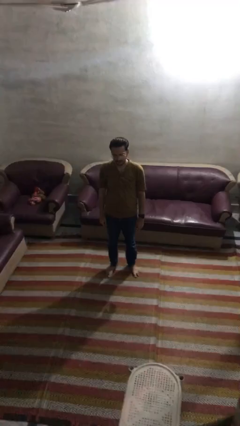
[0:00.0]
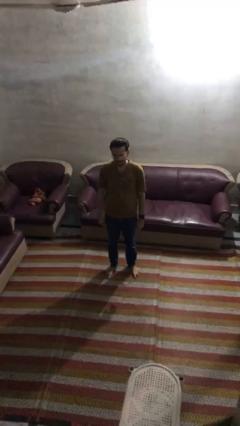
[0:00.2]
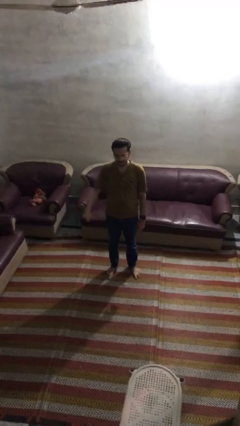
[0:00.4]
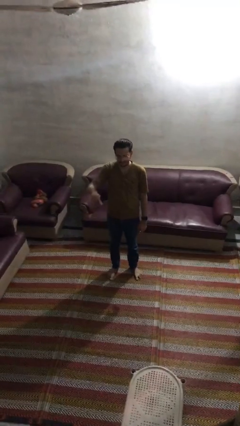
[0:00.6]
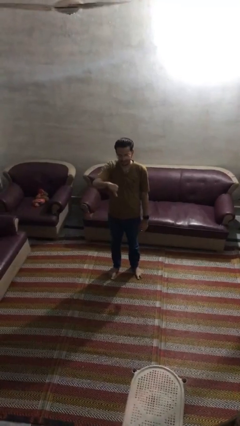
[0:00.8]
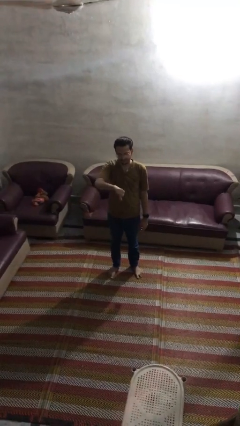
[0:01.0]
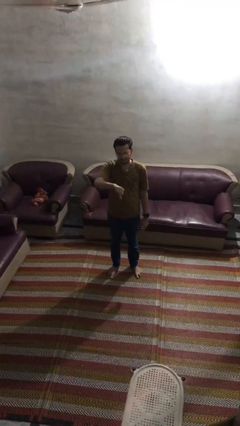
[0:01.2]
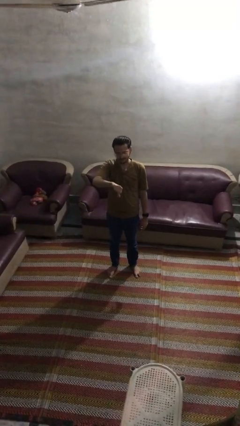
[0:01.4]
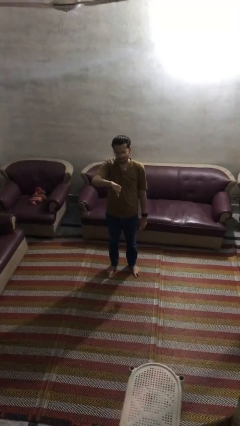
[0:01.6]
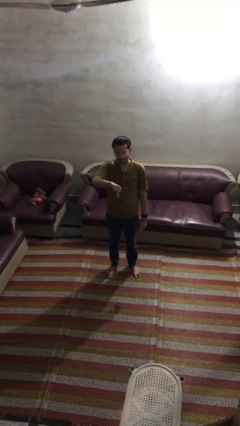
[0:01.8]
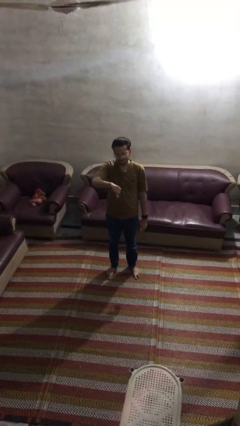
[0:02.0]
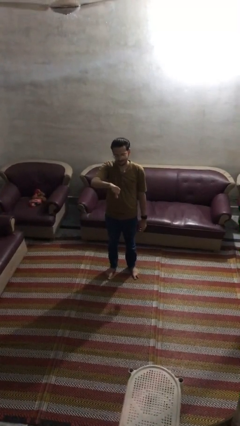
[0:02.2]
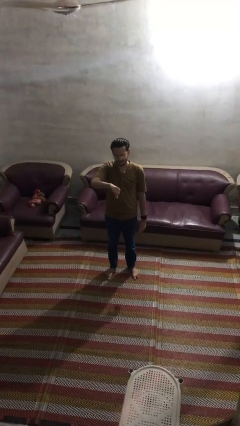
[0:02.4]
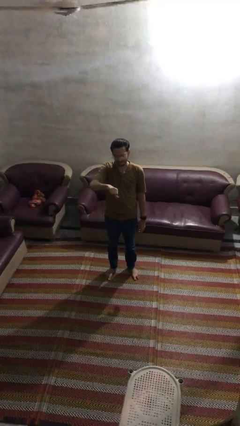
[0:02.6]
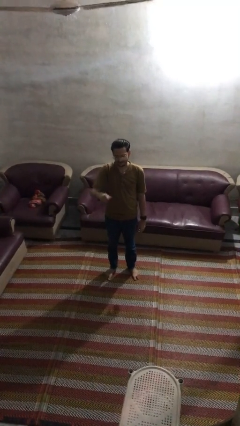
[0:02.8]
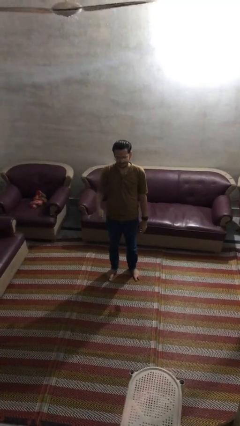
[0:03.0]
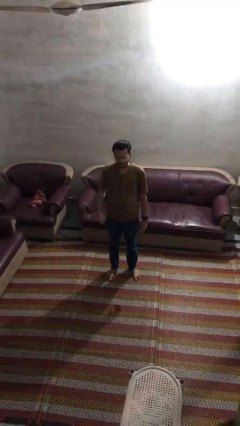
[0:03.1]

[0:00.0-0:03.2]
person gestures thumbs down

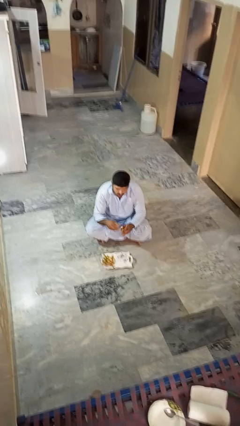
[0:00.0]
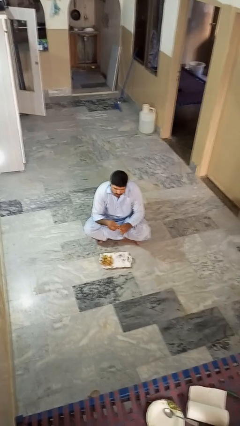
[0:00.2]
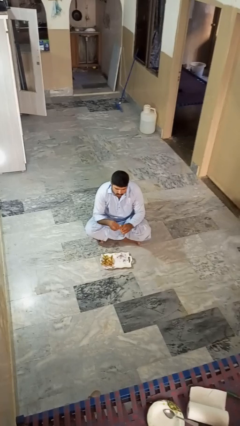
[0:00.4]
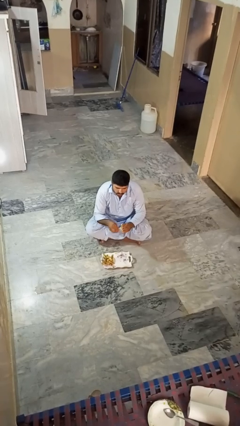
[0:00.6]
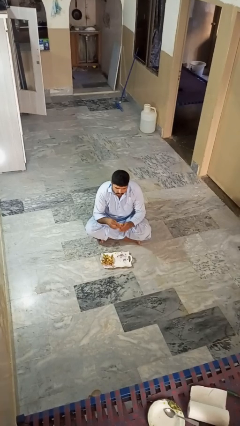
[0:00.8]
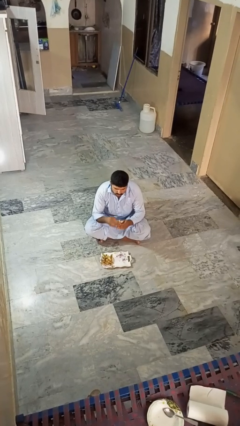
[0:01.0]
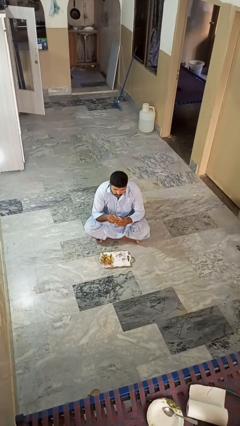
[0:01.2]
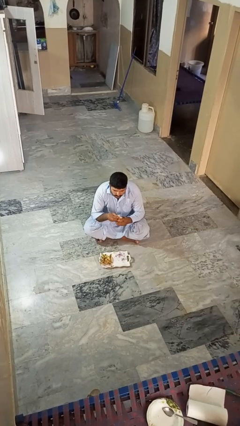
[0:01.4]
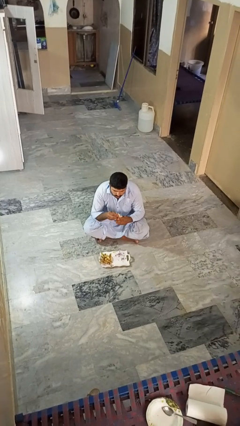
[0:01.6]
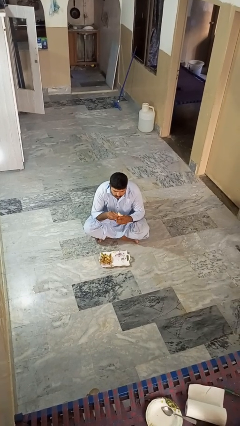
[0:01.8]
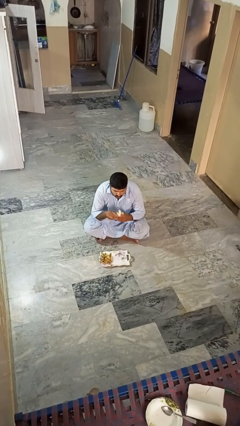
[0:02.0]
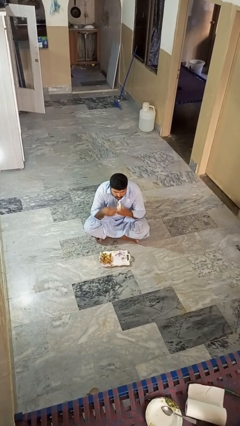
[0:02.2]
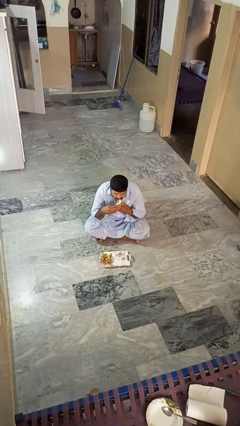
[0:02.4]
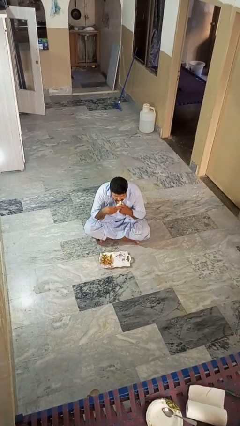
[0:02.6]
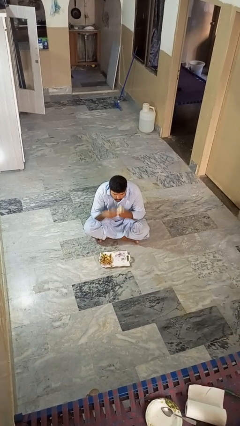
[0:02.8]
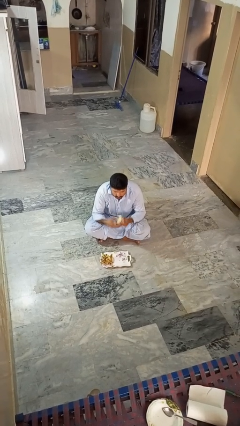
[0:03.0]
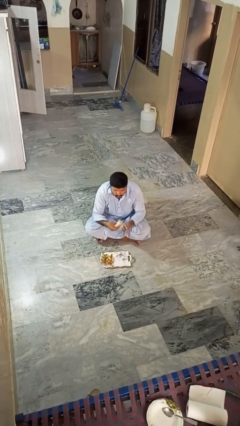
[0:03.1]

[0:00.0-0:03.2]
person eats banana

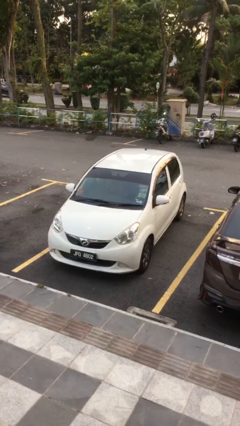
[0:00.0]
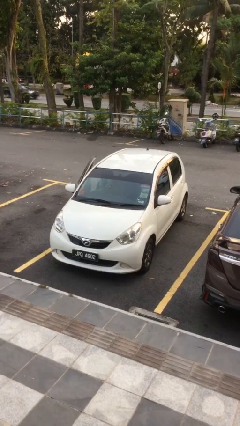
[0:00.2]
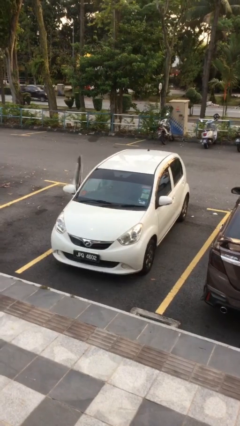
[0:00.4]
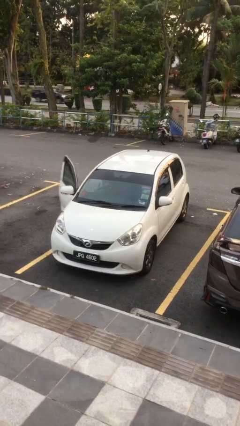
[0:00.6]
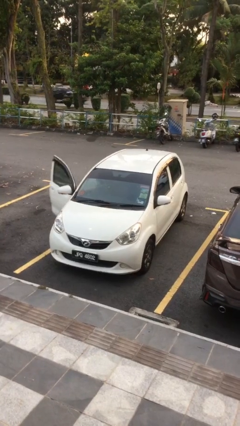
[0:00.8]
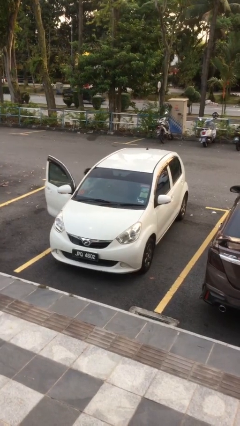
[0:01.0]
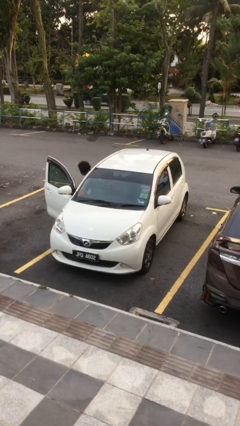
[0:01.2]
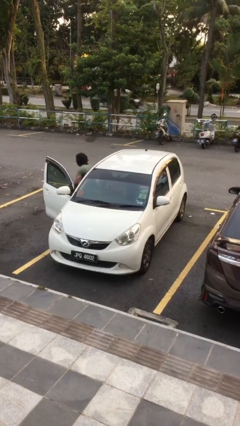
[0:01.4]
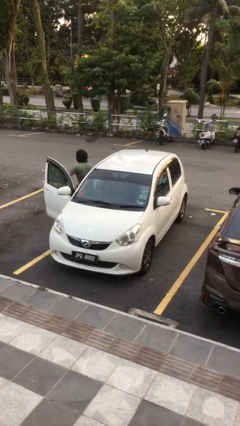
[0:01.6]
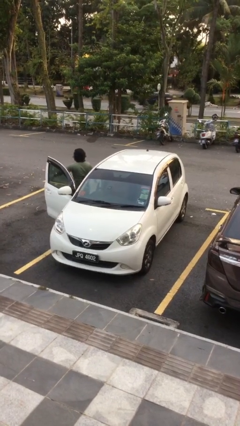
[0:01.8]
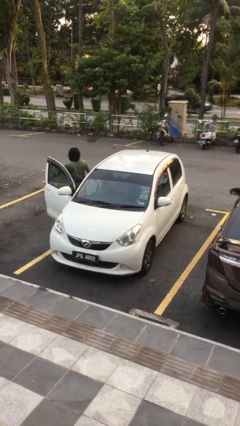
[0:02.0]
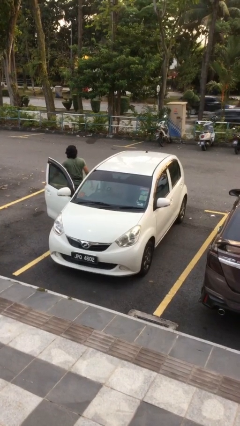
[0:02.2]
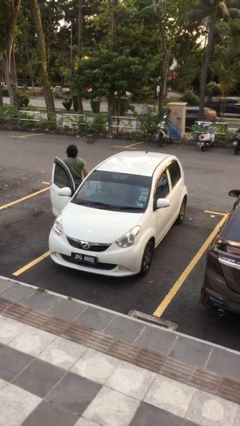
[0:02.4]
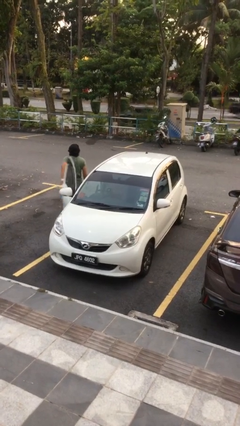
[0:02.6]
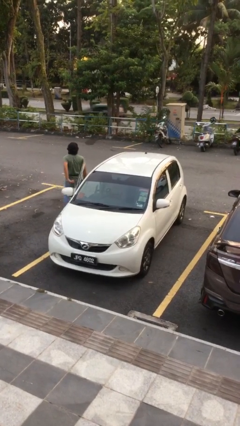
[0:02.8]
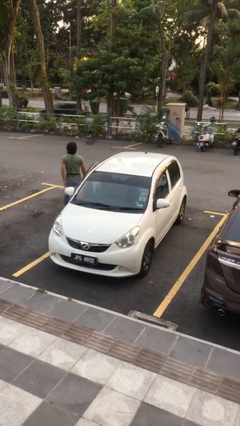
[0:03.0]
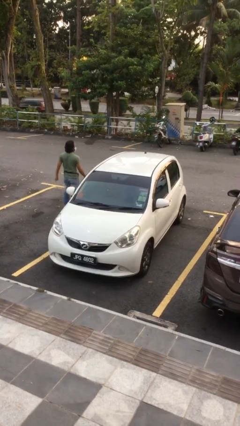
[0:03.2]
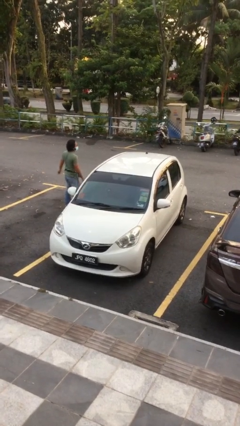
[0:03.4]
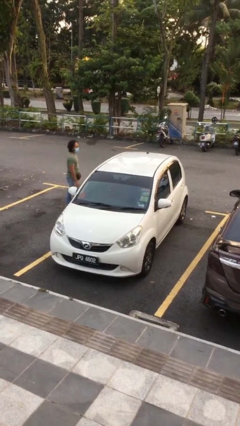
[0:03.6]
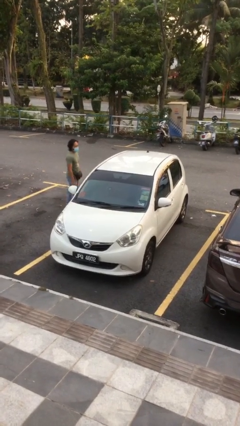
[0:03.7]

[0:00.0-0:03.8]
car drops off person

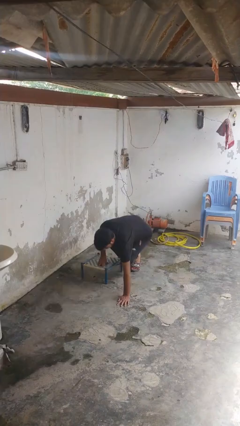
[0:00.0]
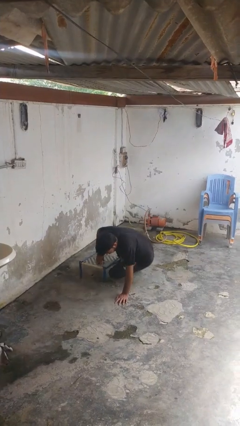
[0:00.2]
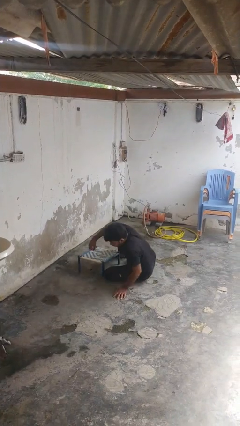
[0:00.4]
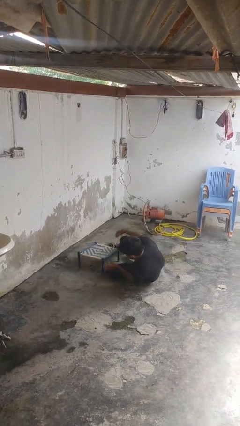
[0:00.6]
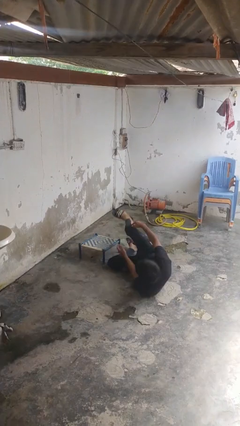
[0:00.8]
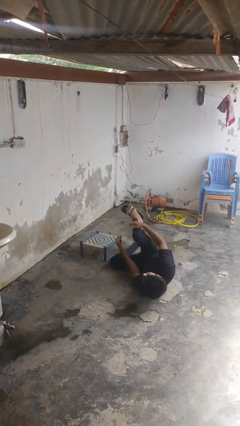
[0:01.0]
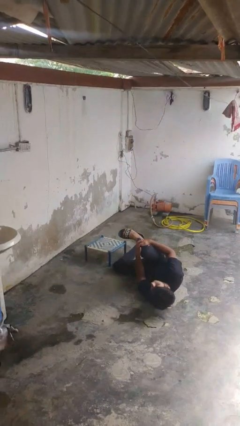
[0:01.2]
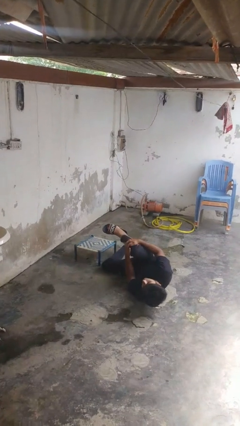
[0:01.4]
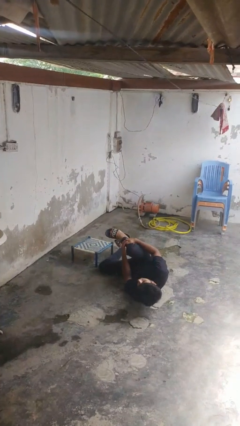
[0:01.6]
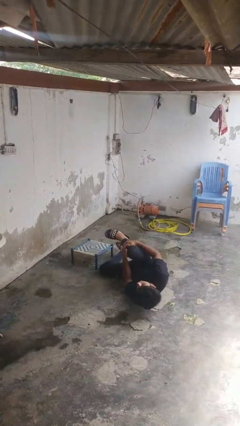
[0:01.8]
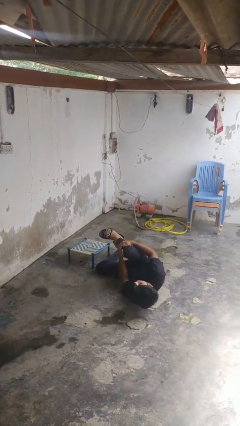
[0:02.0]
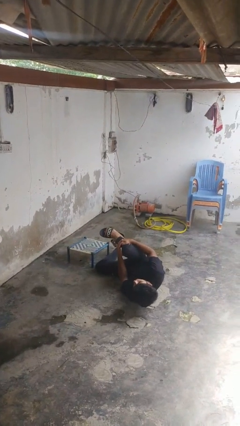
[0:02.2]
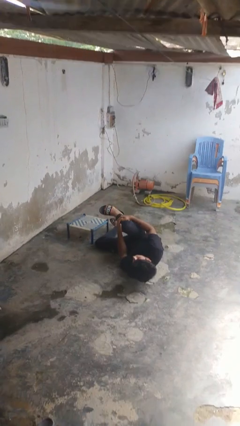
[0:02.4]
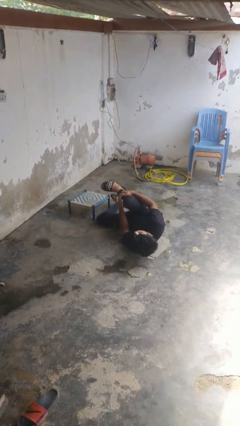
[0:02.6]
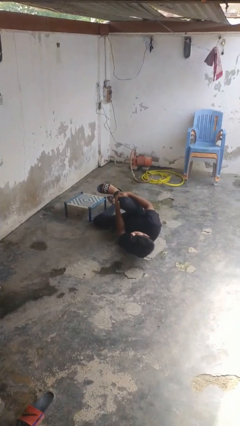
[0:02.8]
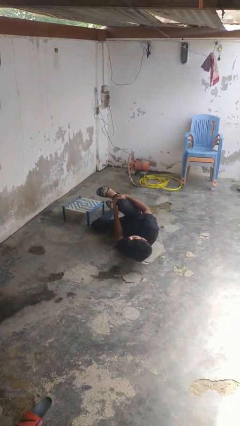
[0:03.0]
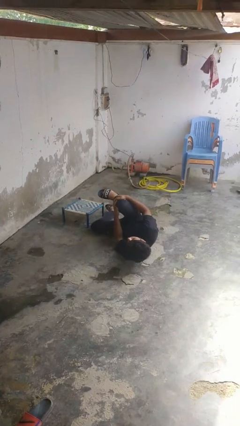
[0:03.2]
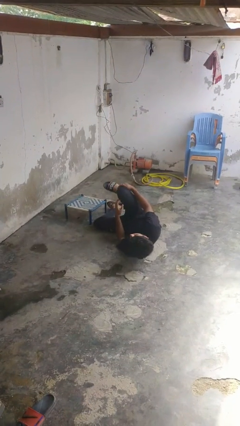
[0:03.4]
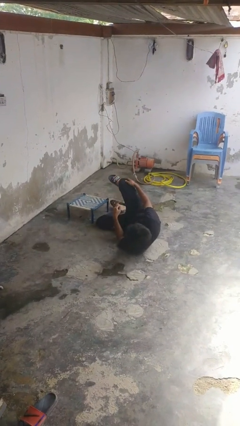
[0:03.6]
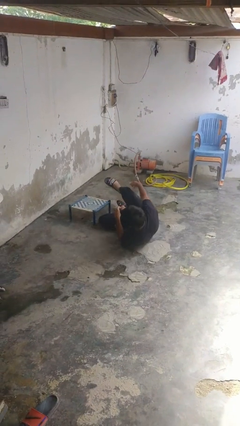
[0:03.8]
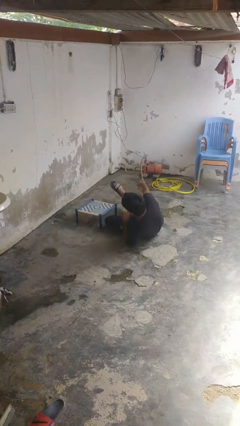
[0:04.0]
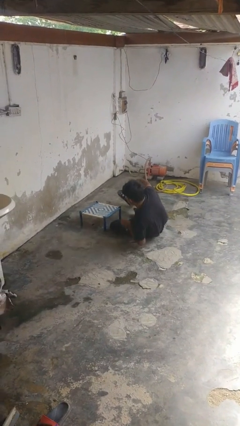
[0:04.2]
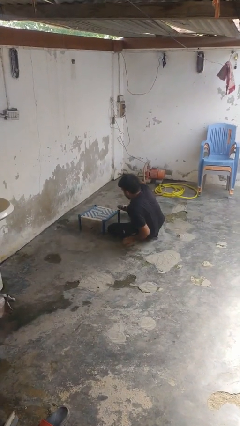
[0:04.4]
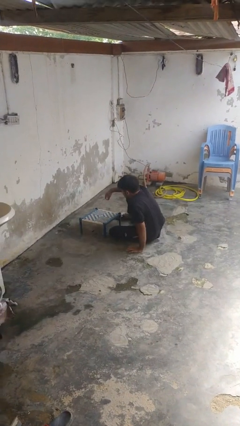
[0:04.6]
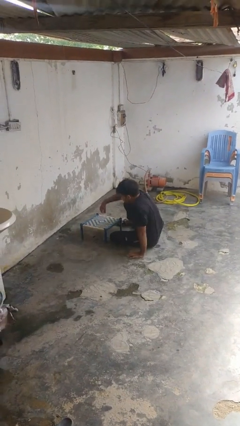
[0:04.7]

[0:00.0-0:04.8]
person lies down on floor

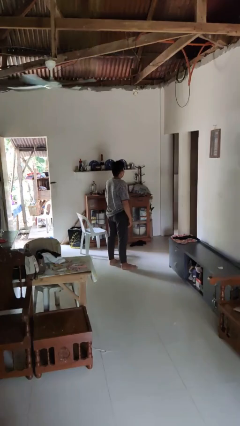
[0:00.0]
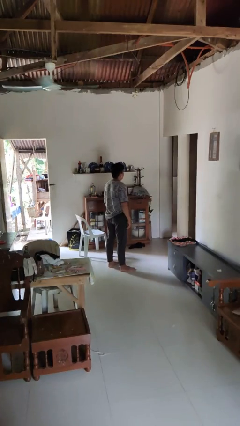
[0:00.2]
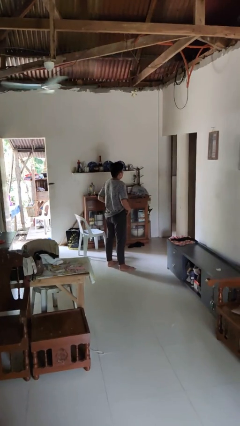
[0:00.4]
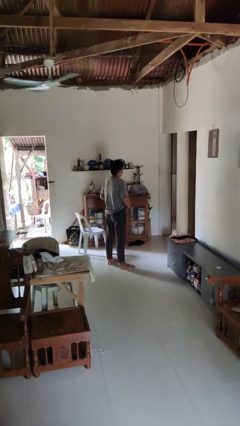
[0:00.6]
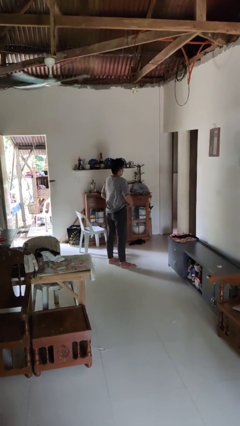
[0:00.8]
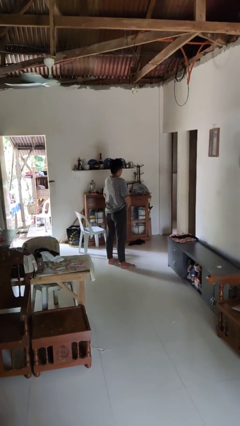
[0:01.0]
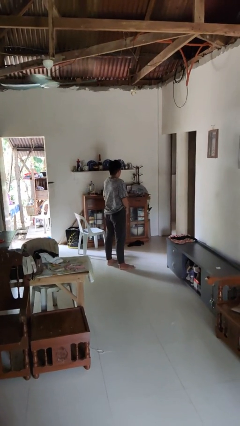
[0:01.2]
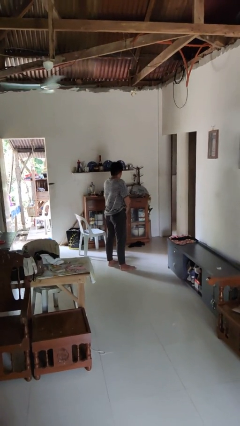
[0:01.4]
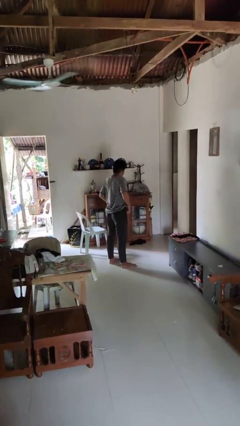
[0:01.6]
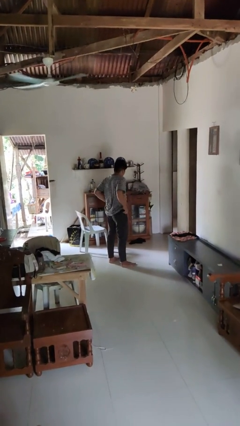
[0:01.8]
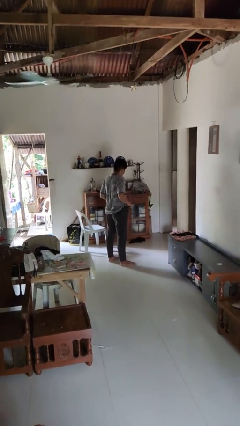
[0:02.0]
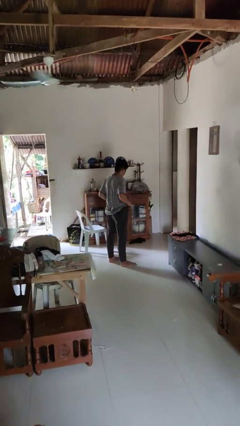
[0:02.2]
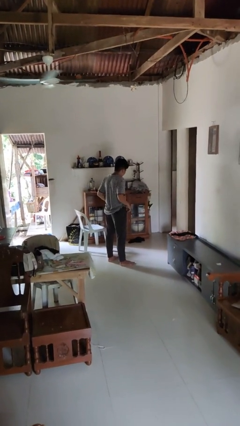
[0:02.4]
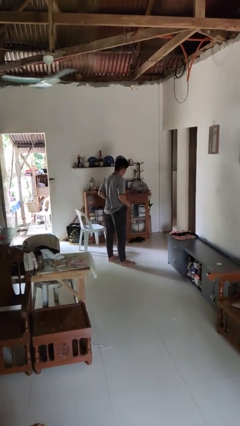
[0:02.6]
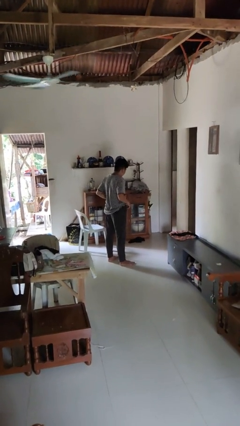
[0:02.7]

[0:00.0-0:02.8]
person hikes up pants
